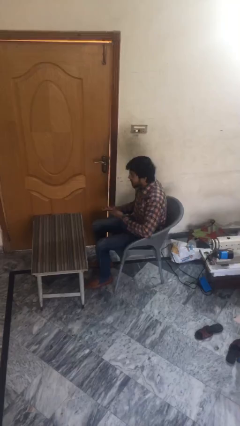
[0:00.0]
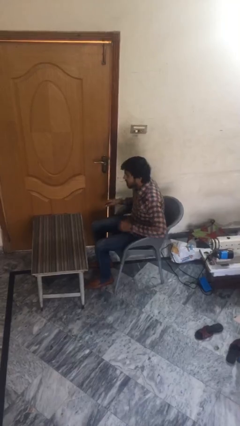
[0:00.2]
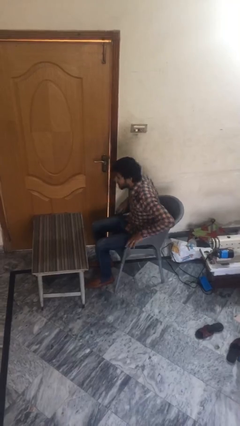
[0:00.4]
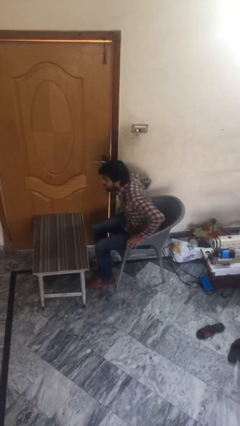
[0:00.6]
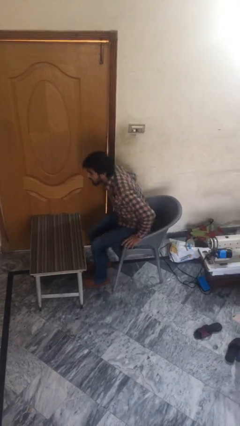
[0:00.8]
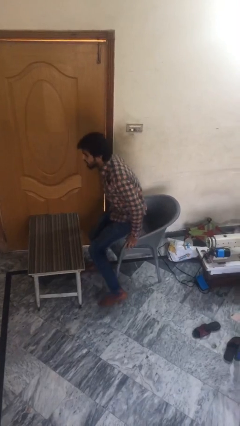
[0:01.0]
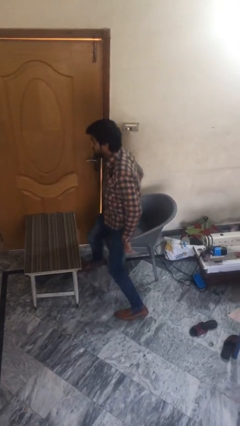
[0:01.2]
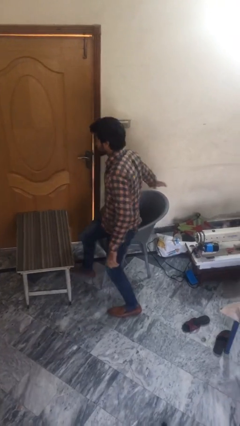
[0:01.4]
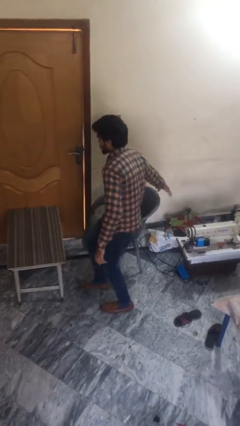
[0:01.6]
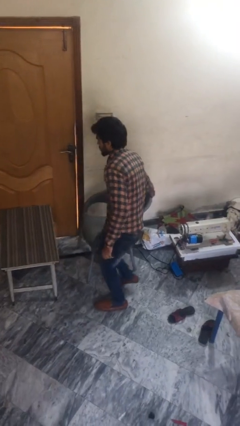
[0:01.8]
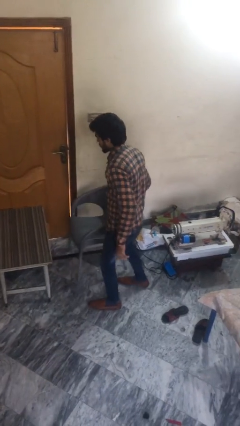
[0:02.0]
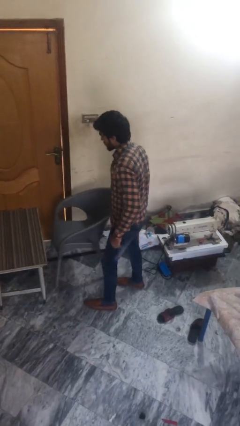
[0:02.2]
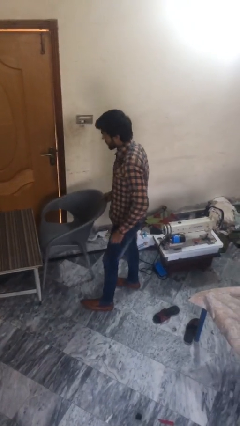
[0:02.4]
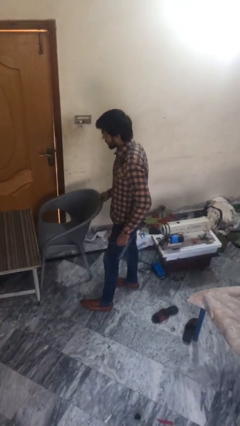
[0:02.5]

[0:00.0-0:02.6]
person stands up

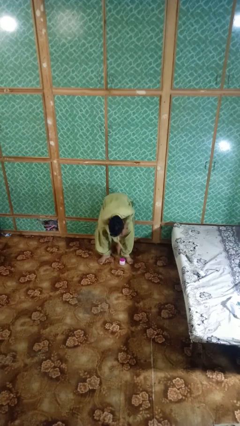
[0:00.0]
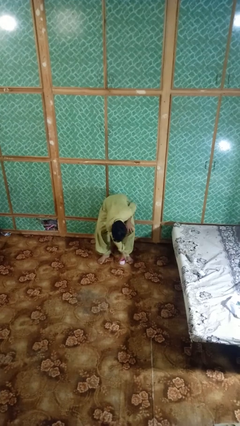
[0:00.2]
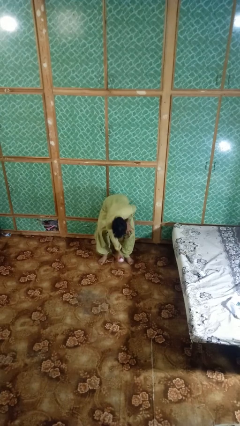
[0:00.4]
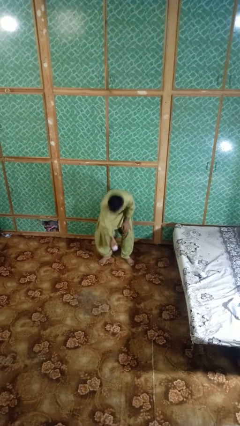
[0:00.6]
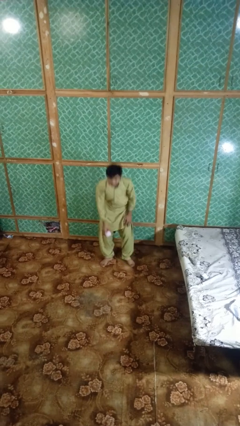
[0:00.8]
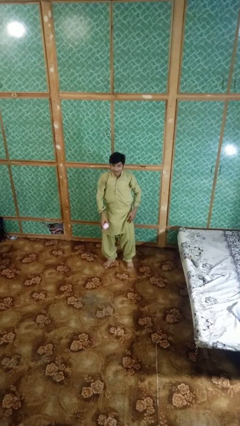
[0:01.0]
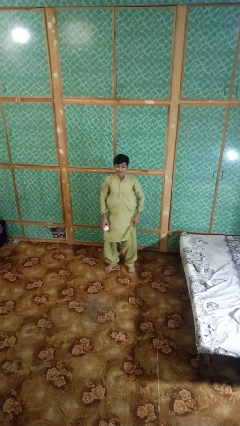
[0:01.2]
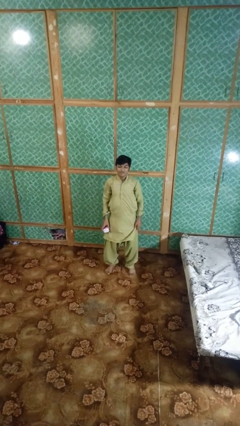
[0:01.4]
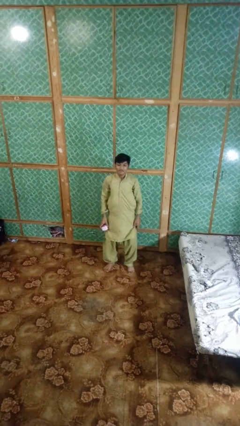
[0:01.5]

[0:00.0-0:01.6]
person picks up object from floor

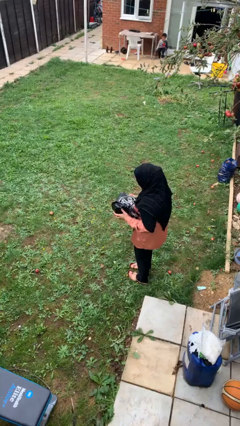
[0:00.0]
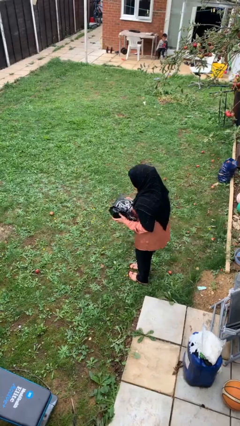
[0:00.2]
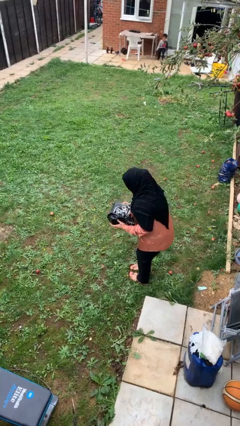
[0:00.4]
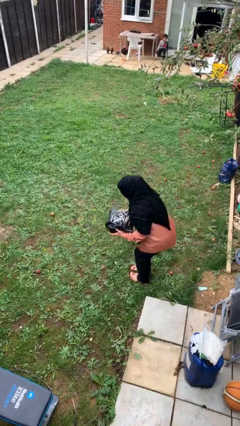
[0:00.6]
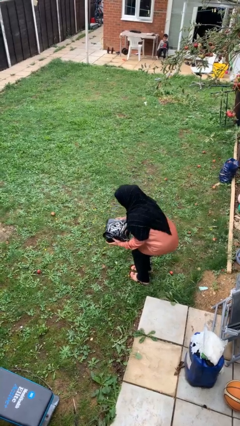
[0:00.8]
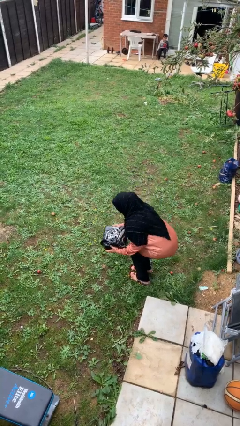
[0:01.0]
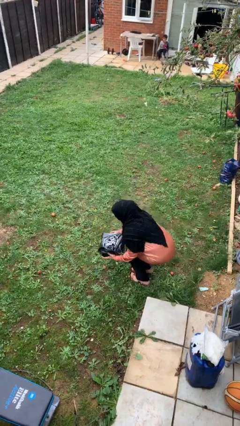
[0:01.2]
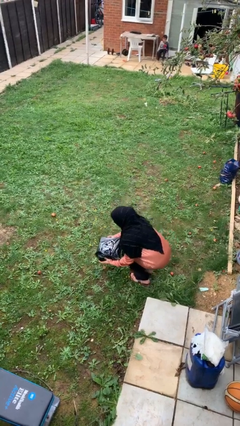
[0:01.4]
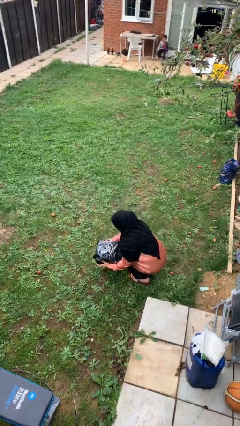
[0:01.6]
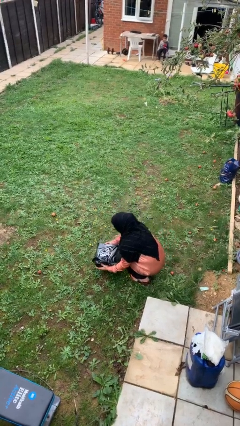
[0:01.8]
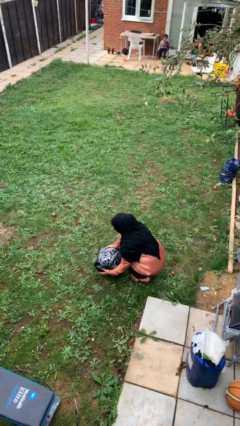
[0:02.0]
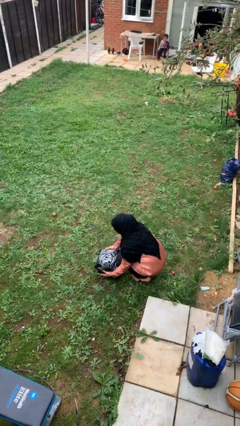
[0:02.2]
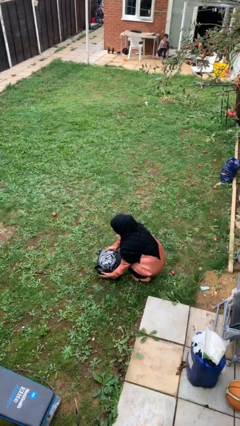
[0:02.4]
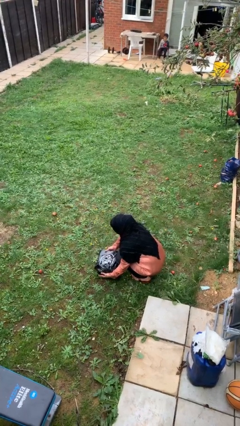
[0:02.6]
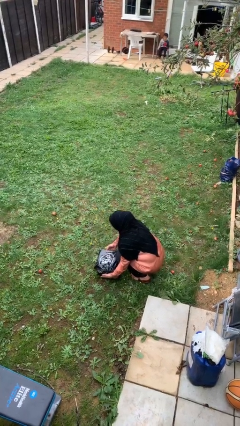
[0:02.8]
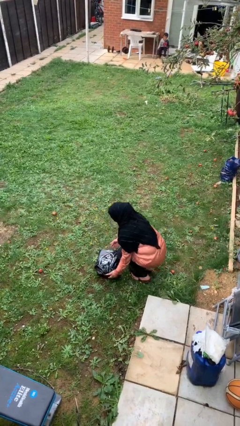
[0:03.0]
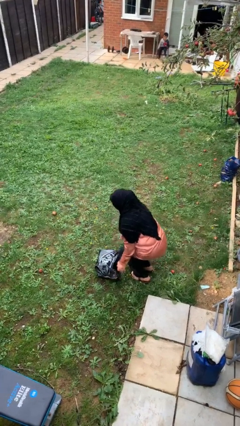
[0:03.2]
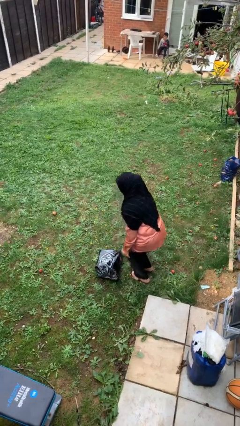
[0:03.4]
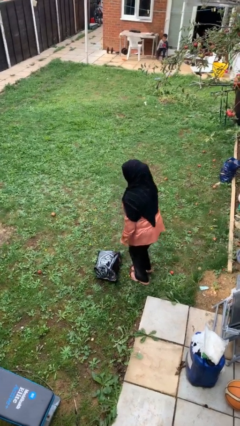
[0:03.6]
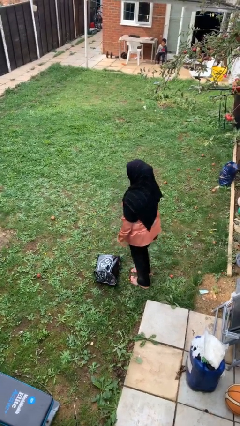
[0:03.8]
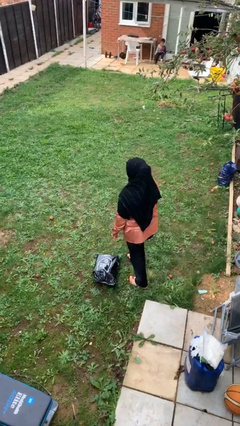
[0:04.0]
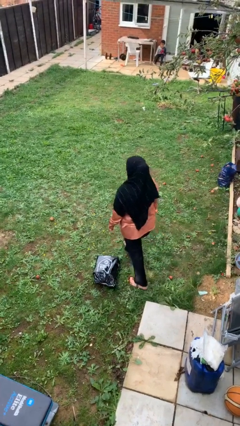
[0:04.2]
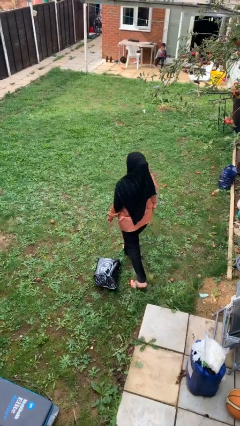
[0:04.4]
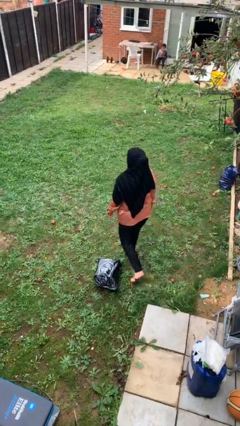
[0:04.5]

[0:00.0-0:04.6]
person puts down object on floor

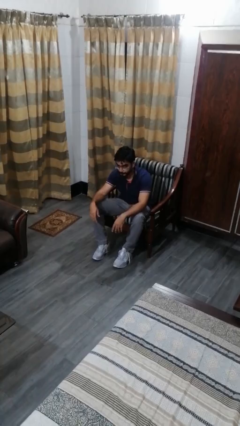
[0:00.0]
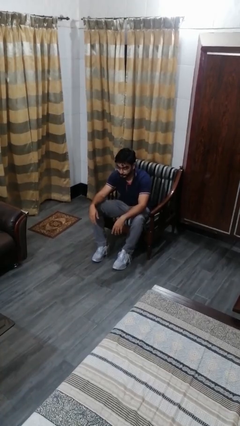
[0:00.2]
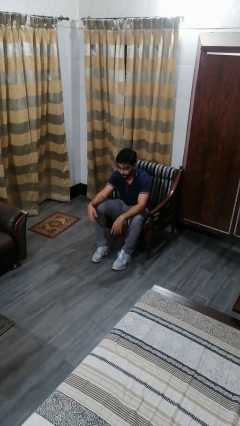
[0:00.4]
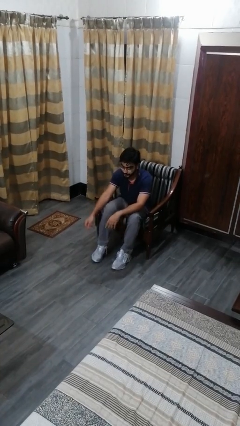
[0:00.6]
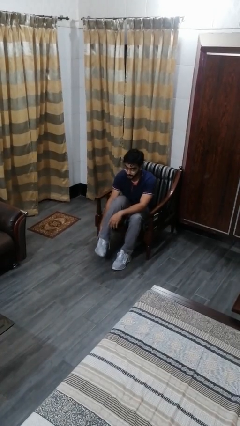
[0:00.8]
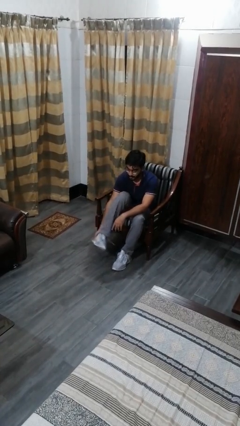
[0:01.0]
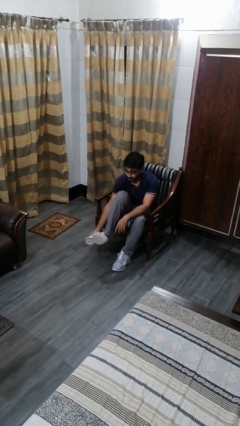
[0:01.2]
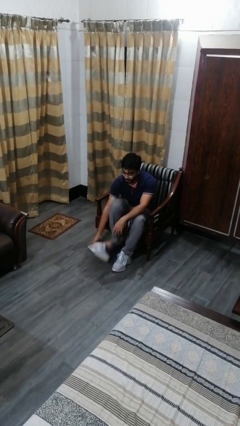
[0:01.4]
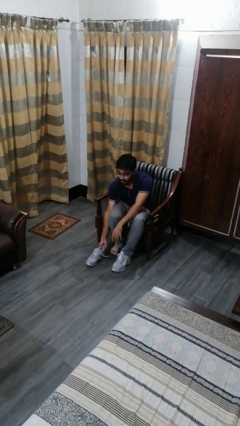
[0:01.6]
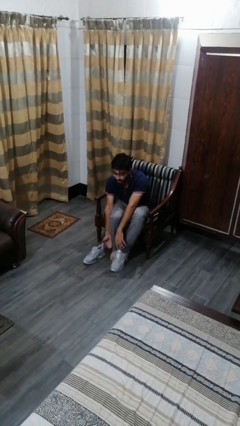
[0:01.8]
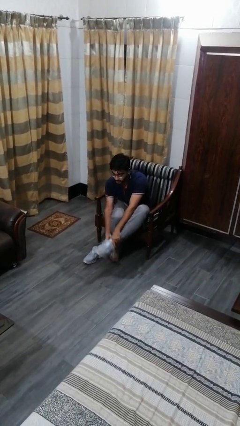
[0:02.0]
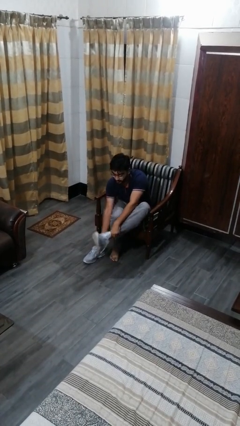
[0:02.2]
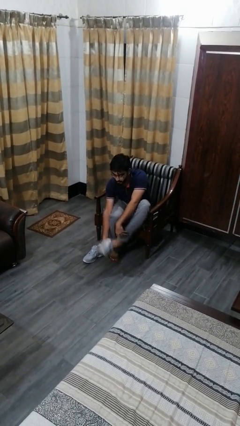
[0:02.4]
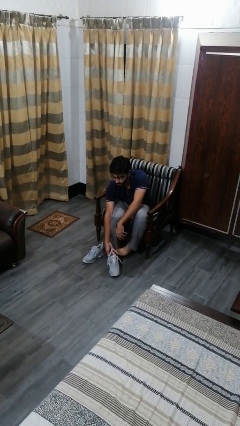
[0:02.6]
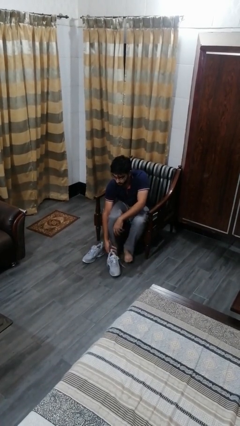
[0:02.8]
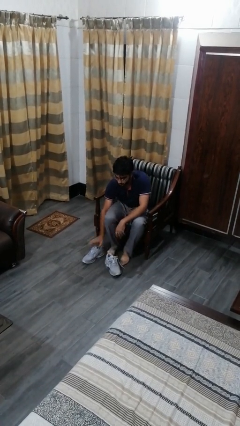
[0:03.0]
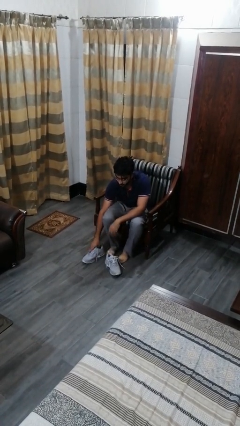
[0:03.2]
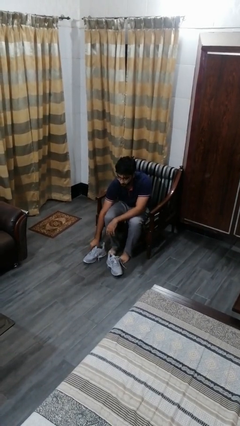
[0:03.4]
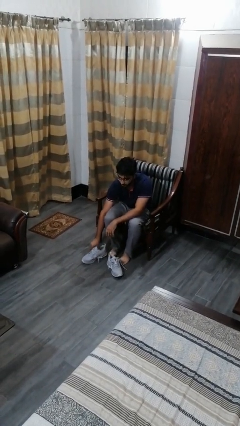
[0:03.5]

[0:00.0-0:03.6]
person takes off shoes

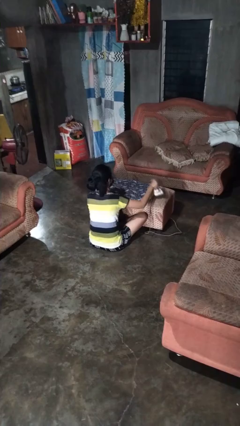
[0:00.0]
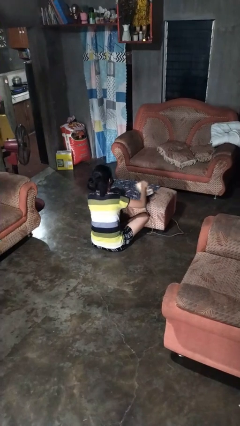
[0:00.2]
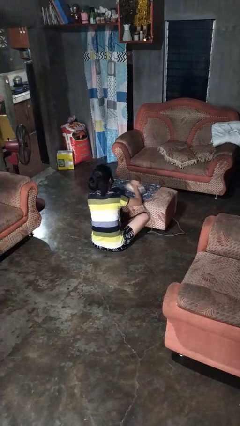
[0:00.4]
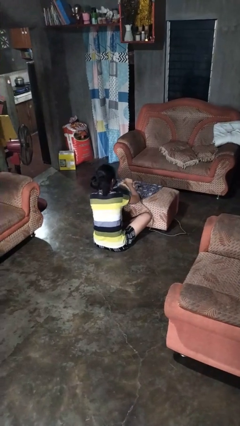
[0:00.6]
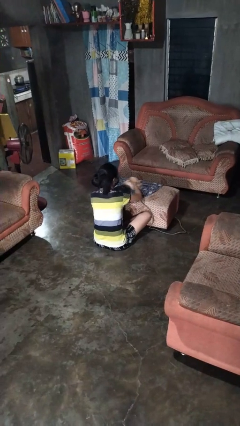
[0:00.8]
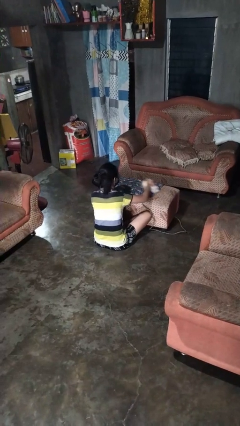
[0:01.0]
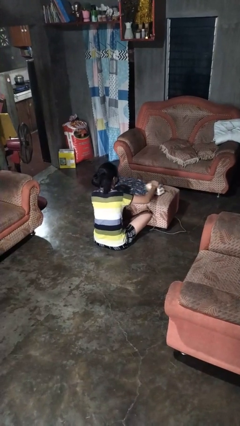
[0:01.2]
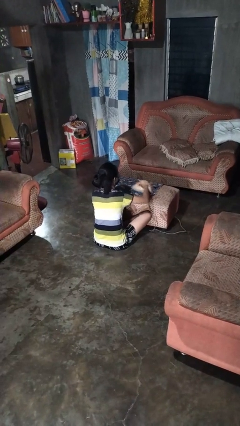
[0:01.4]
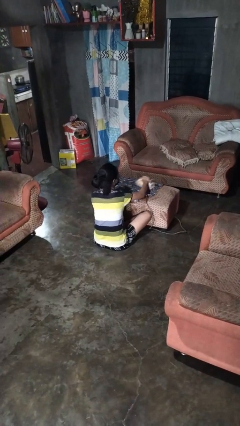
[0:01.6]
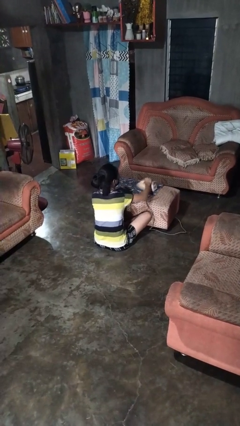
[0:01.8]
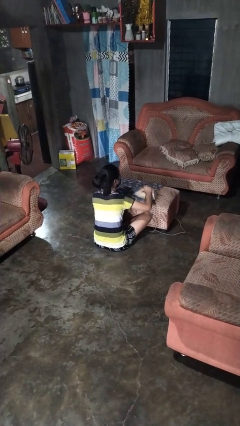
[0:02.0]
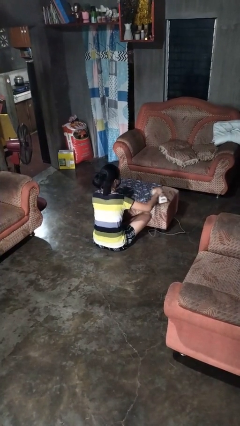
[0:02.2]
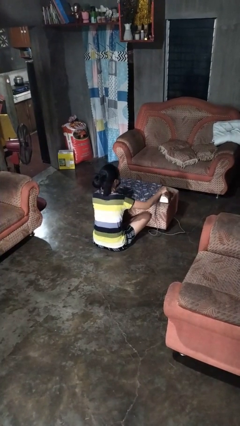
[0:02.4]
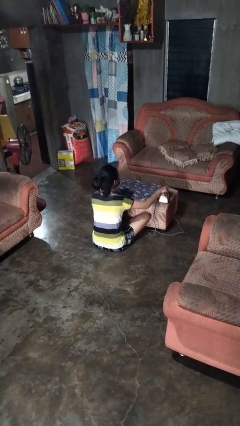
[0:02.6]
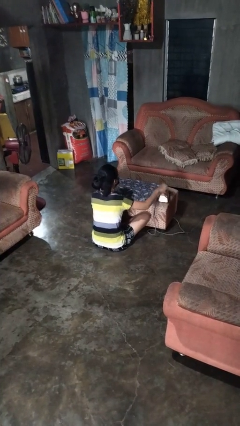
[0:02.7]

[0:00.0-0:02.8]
person irons clothes

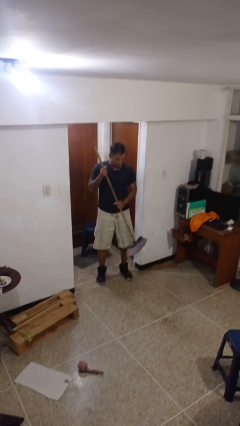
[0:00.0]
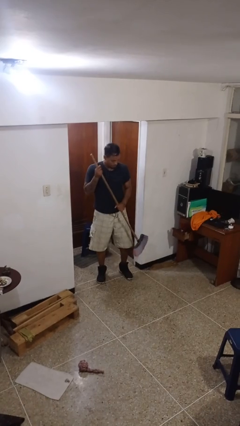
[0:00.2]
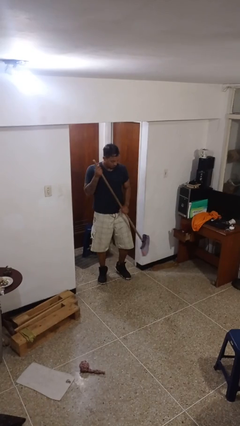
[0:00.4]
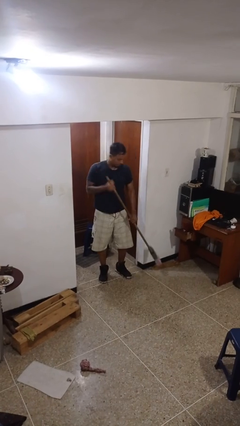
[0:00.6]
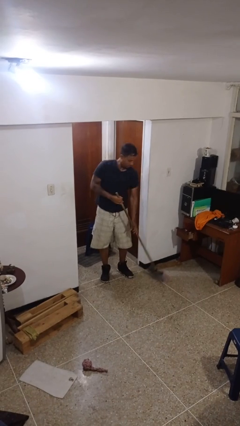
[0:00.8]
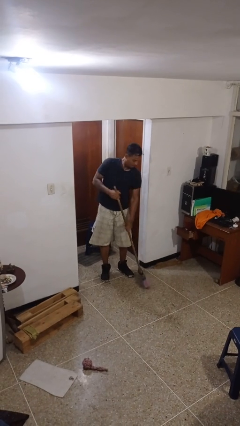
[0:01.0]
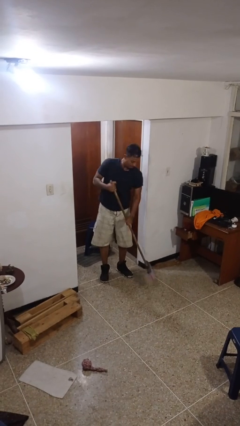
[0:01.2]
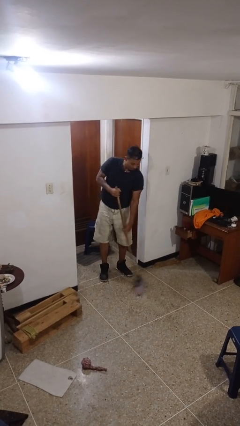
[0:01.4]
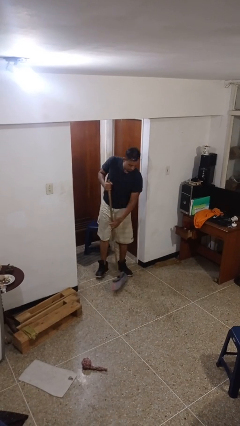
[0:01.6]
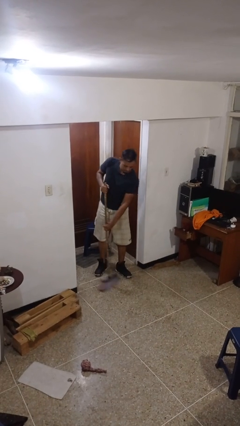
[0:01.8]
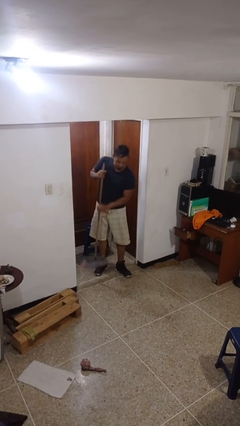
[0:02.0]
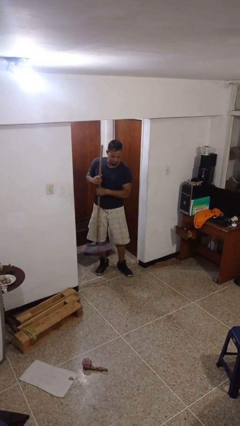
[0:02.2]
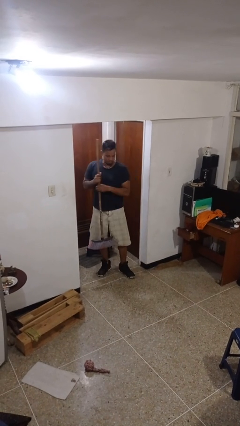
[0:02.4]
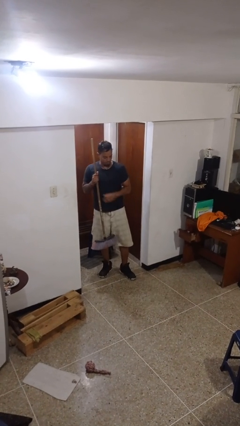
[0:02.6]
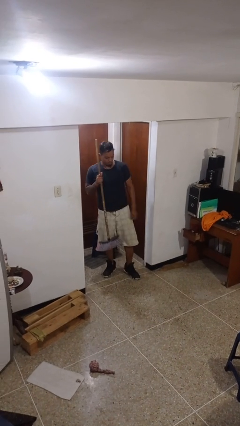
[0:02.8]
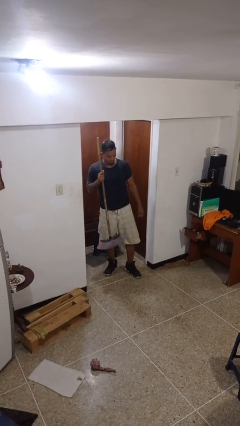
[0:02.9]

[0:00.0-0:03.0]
person sweeps floor
